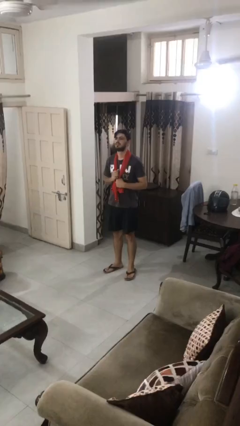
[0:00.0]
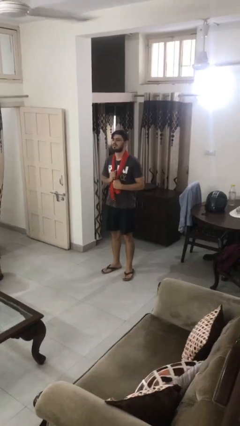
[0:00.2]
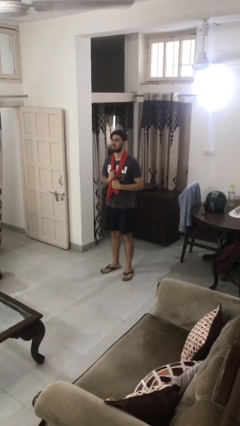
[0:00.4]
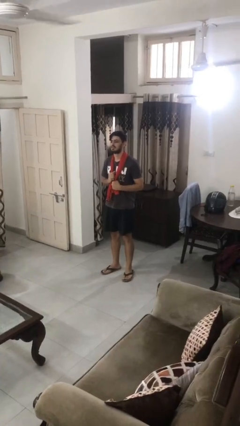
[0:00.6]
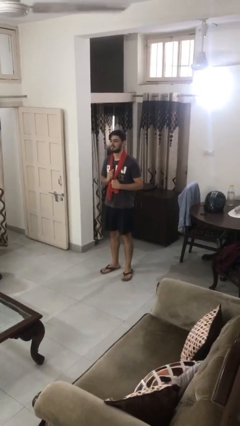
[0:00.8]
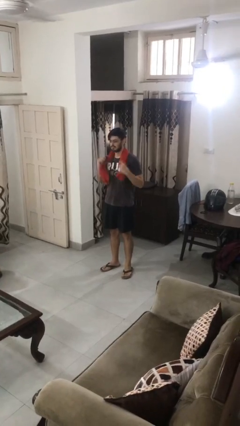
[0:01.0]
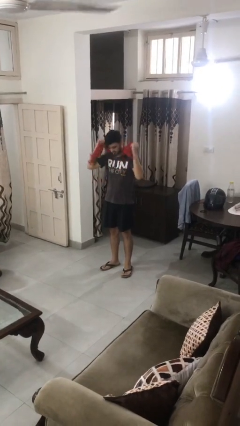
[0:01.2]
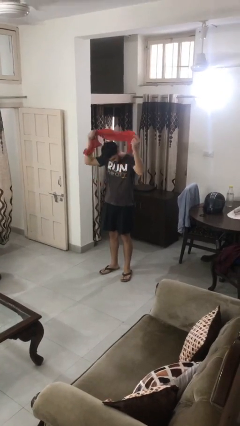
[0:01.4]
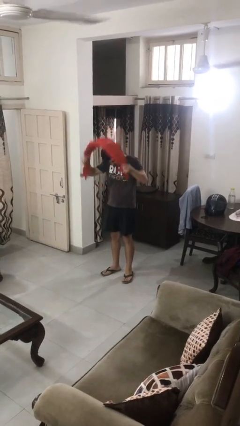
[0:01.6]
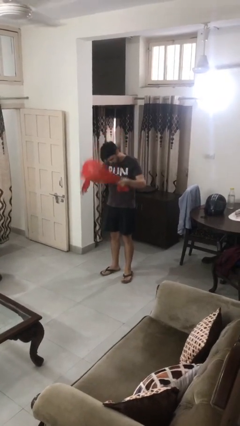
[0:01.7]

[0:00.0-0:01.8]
person takes off scarf

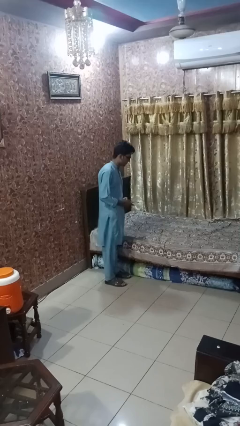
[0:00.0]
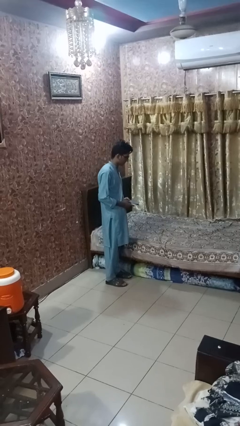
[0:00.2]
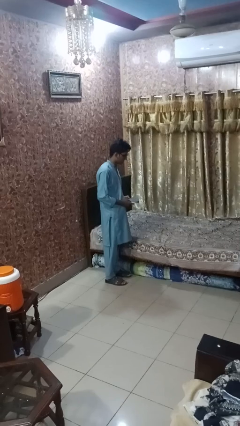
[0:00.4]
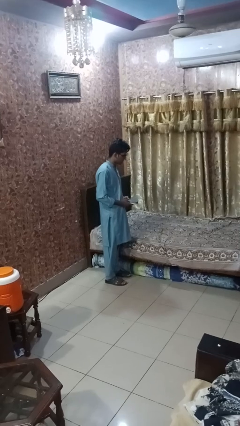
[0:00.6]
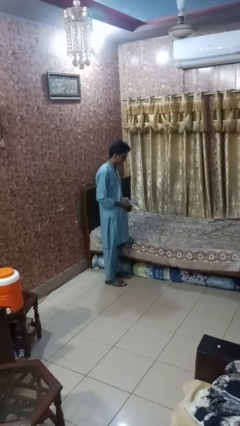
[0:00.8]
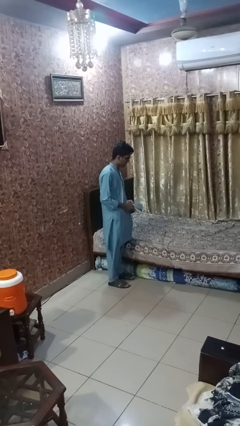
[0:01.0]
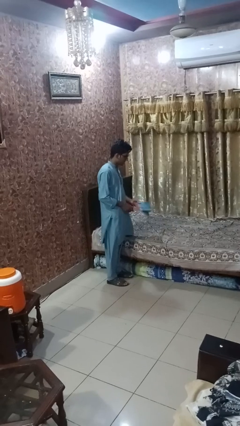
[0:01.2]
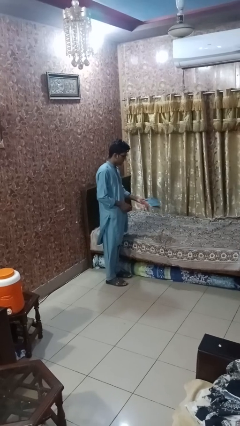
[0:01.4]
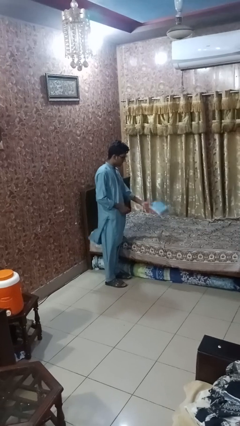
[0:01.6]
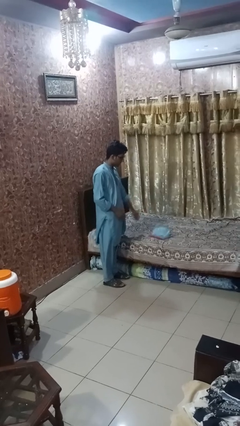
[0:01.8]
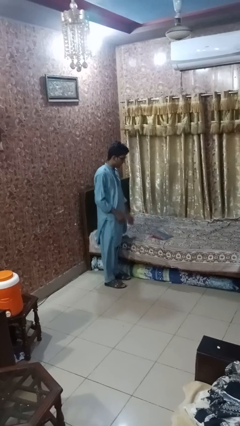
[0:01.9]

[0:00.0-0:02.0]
person picks up object from bed

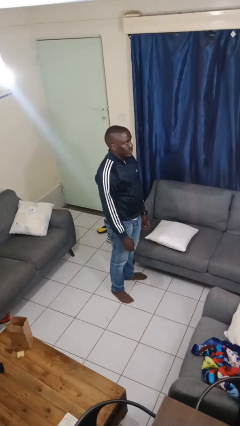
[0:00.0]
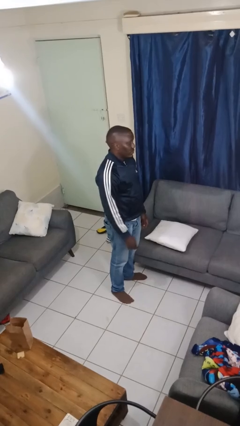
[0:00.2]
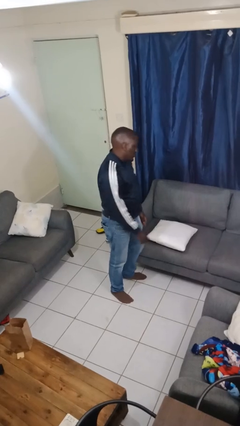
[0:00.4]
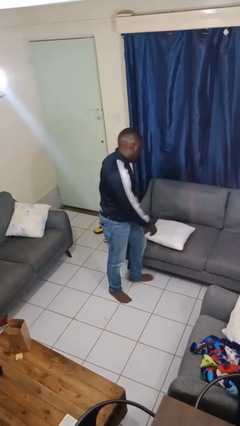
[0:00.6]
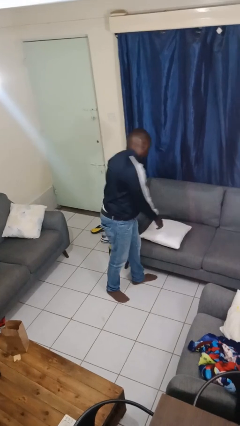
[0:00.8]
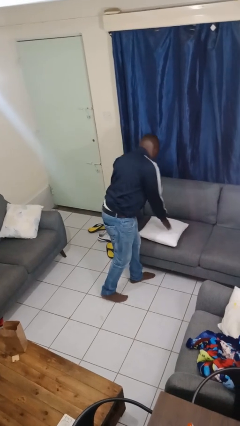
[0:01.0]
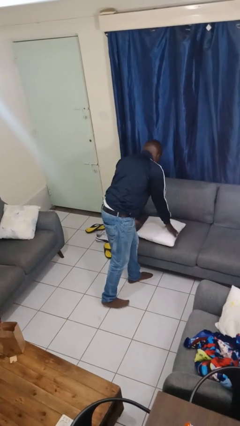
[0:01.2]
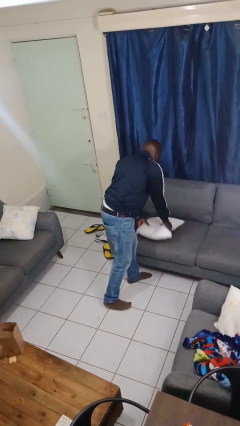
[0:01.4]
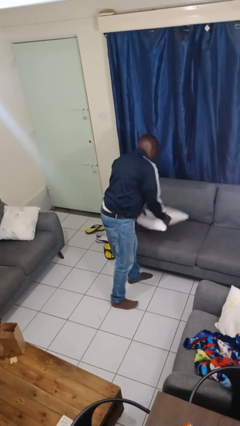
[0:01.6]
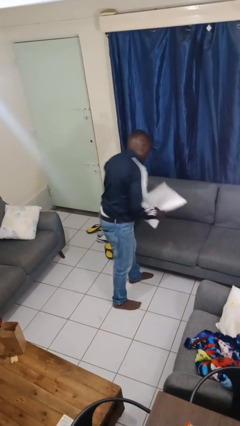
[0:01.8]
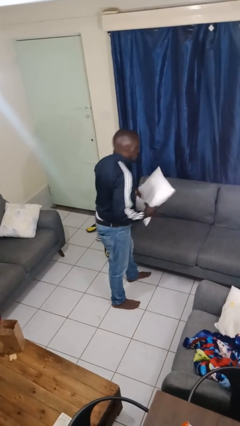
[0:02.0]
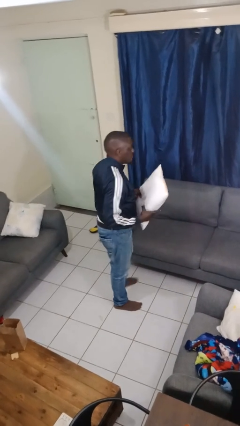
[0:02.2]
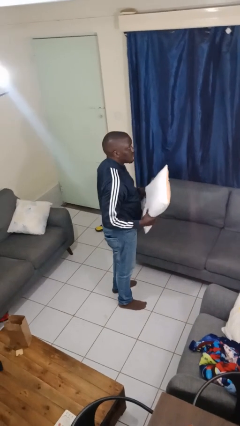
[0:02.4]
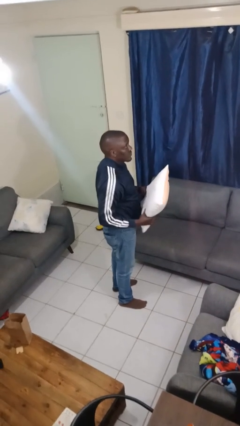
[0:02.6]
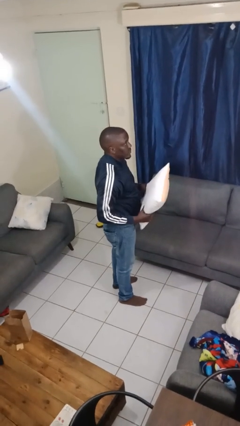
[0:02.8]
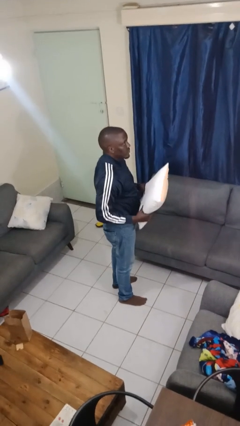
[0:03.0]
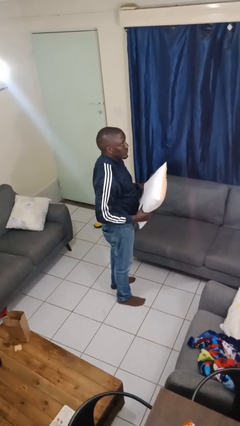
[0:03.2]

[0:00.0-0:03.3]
person picks up object from couch

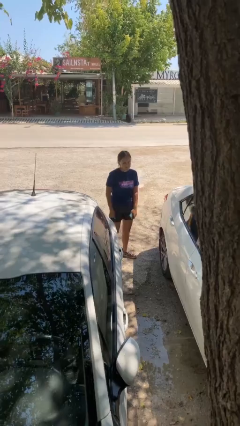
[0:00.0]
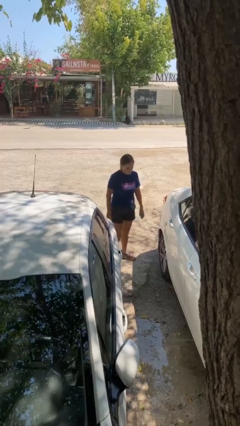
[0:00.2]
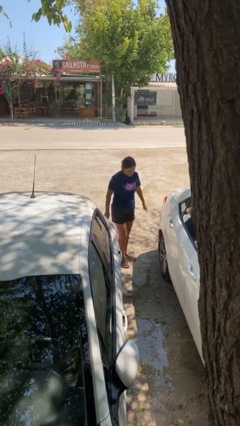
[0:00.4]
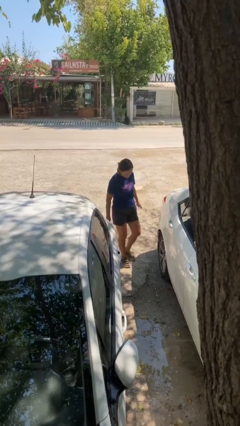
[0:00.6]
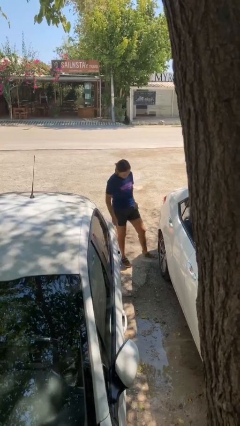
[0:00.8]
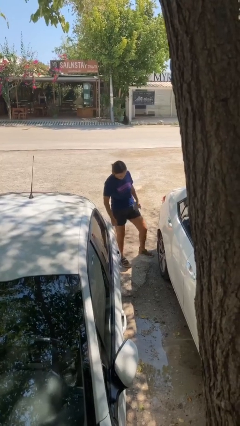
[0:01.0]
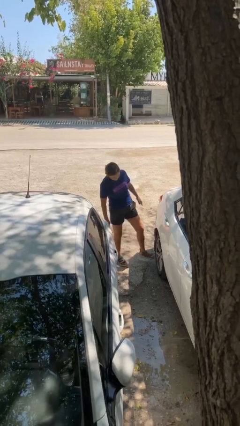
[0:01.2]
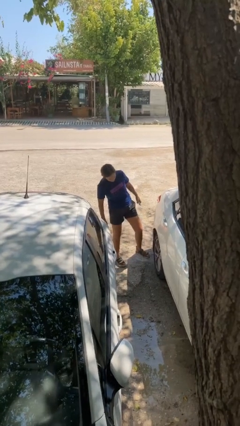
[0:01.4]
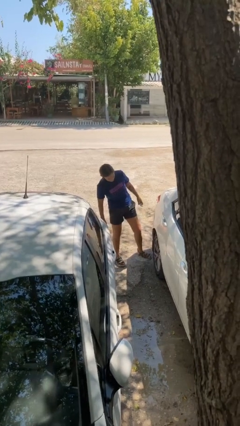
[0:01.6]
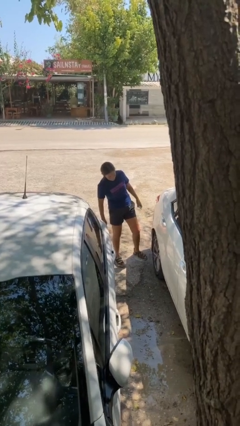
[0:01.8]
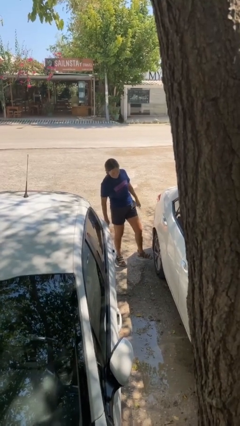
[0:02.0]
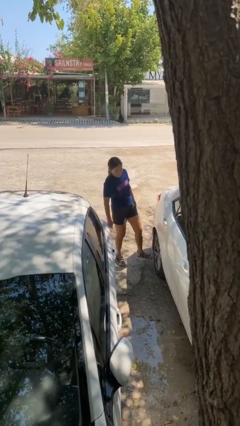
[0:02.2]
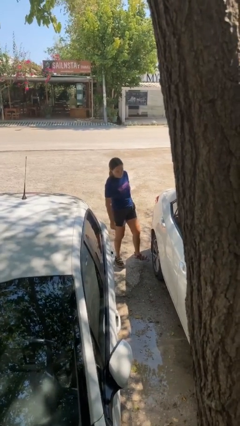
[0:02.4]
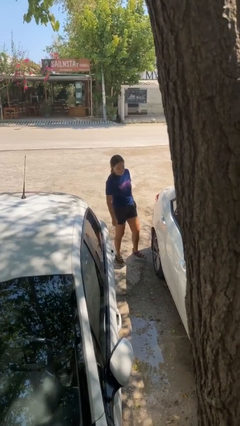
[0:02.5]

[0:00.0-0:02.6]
person kicks car tires

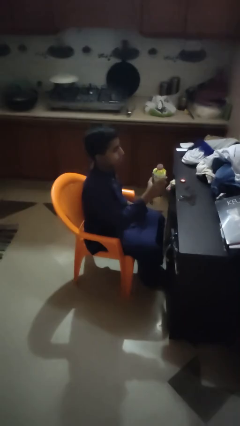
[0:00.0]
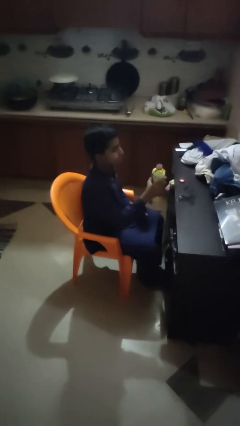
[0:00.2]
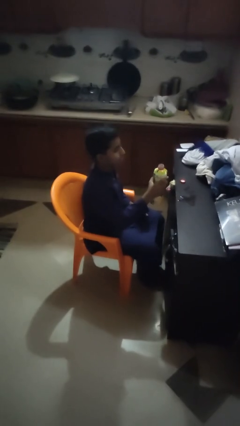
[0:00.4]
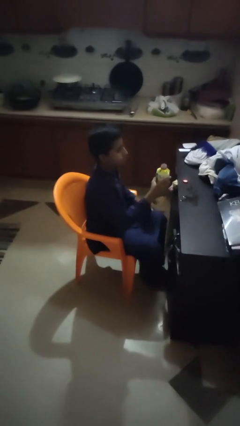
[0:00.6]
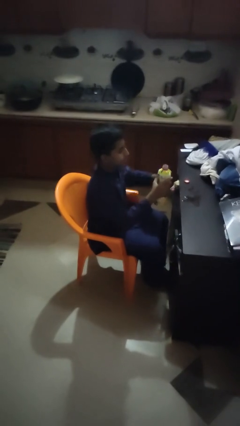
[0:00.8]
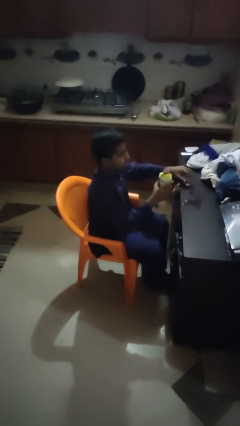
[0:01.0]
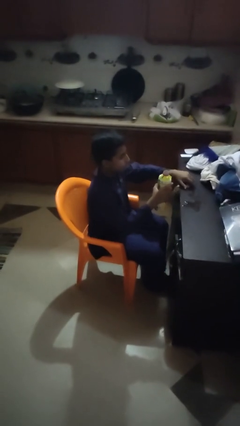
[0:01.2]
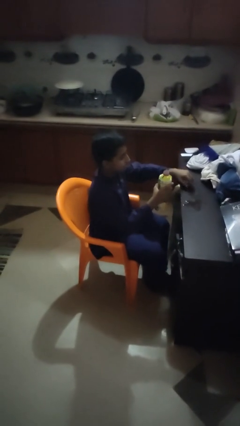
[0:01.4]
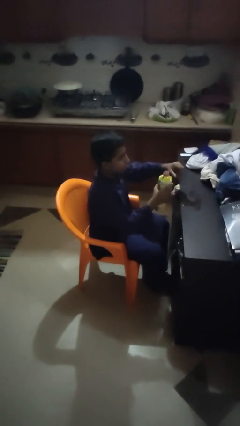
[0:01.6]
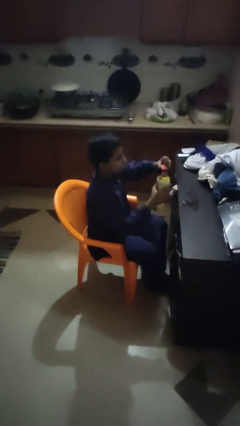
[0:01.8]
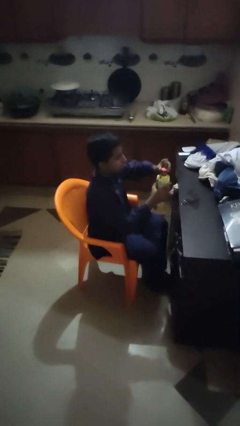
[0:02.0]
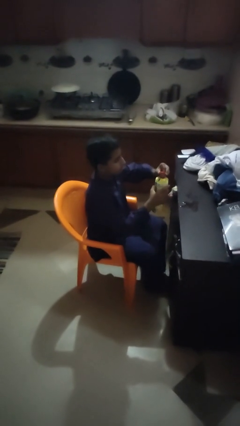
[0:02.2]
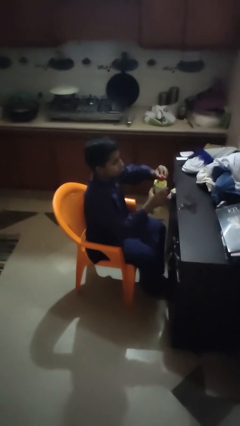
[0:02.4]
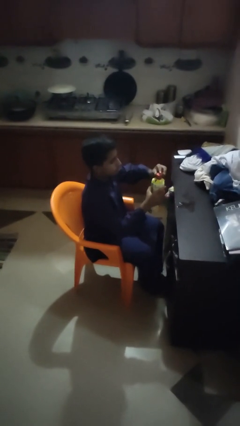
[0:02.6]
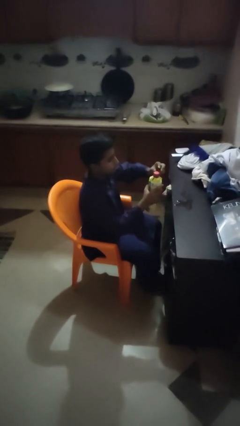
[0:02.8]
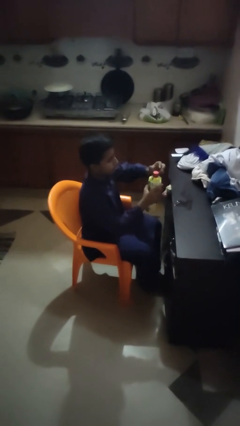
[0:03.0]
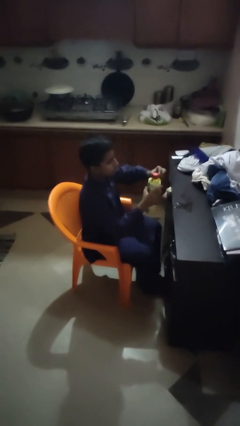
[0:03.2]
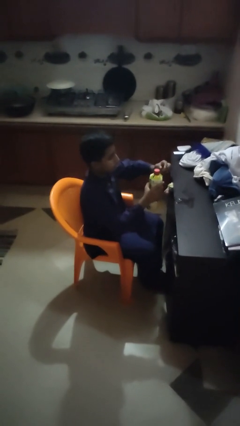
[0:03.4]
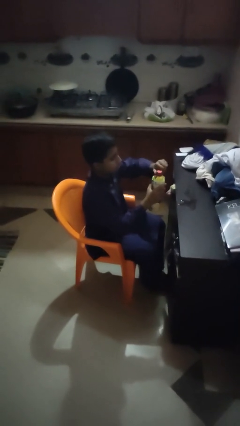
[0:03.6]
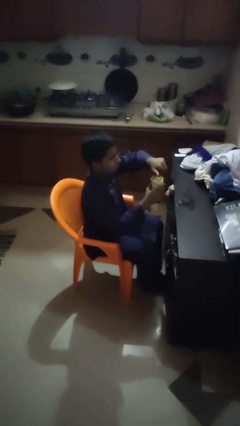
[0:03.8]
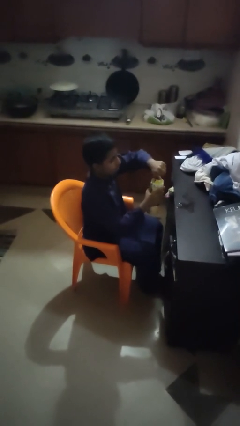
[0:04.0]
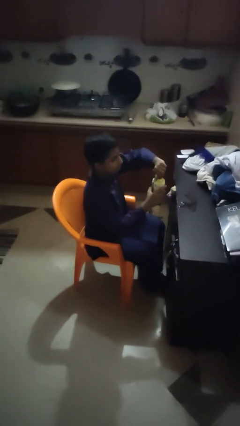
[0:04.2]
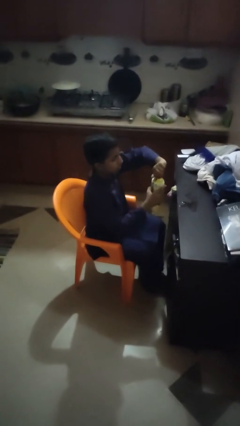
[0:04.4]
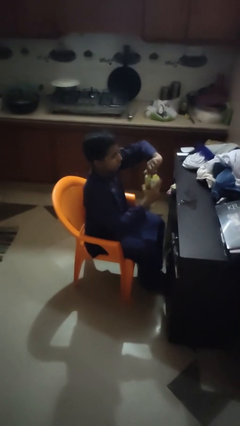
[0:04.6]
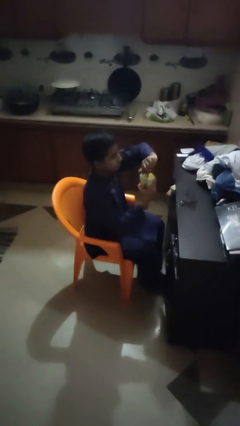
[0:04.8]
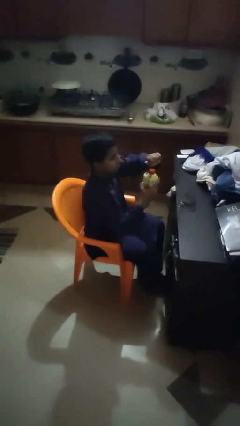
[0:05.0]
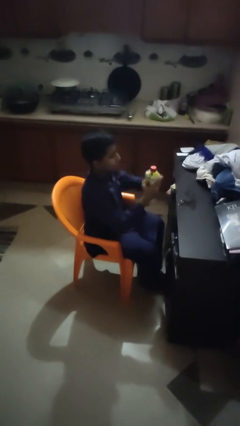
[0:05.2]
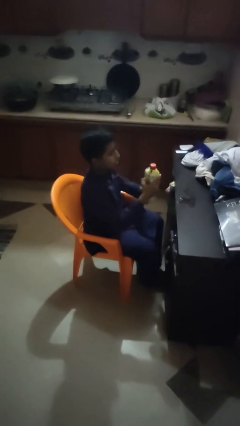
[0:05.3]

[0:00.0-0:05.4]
person screws lid to bottle

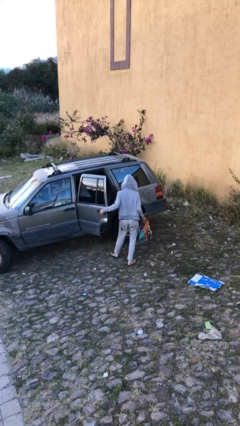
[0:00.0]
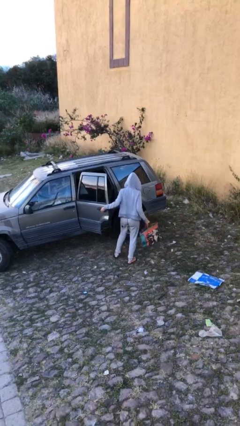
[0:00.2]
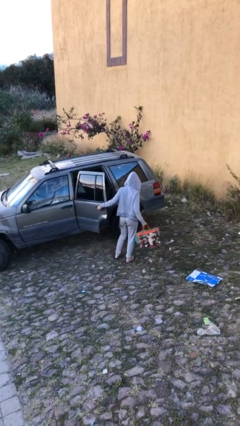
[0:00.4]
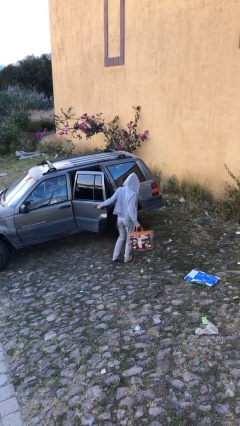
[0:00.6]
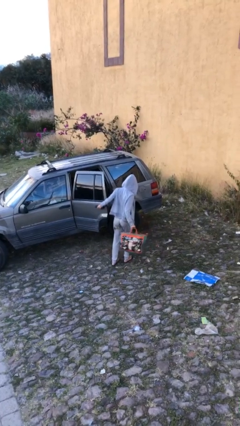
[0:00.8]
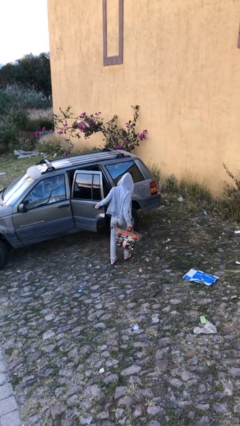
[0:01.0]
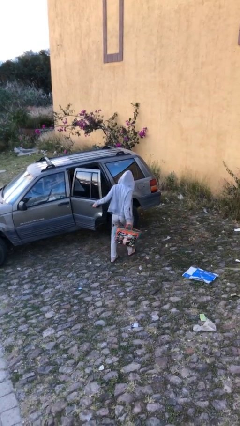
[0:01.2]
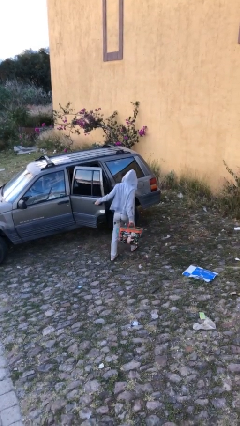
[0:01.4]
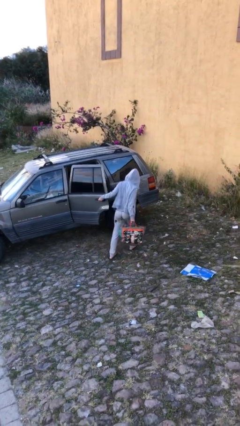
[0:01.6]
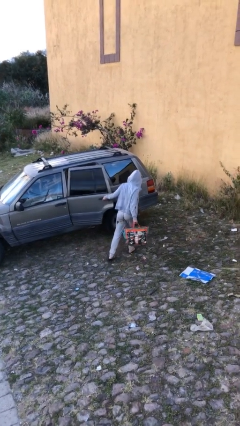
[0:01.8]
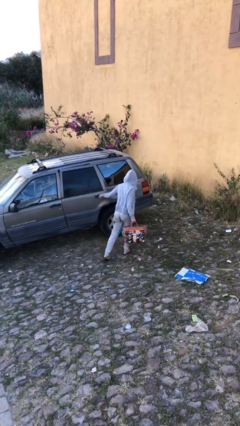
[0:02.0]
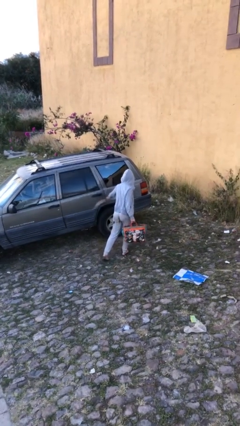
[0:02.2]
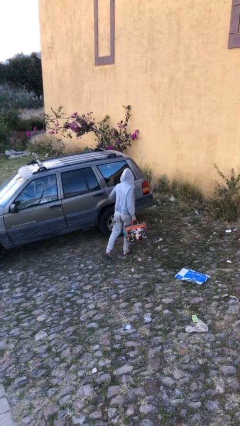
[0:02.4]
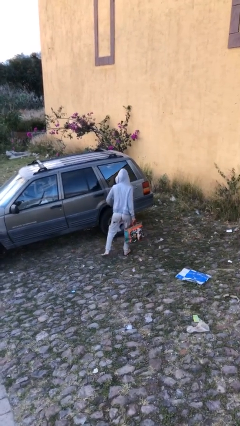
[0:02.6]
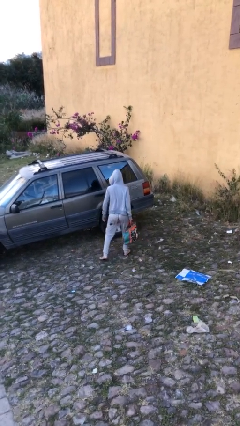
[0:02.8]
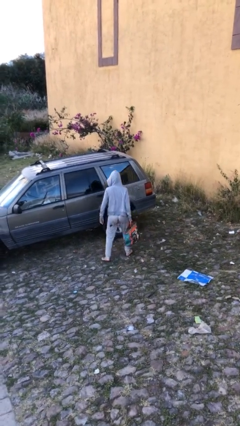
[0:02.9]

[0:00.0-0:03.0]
person closes car door
